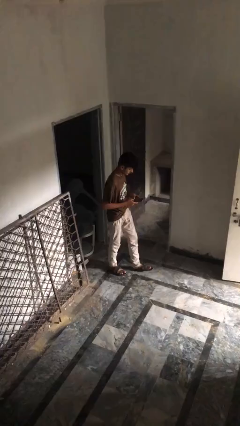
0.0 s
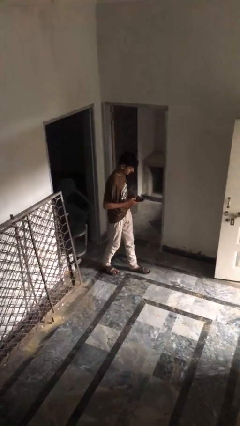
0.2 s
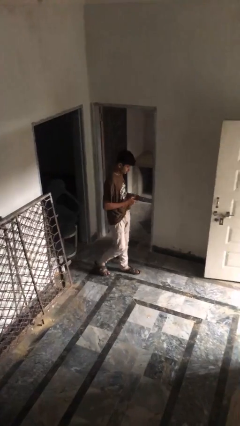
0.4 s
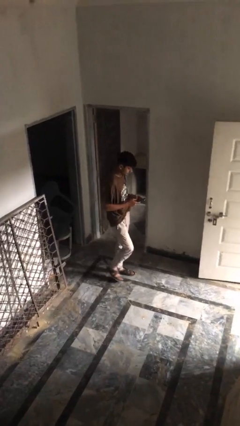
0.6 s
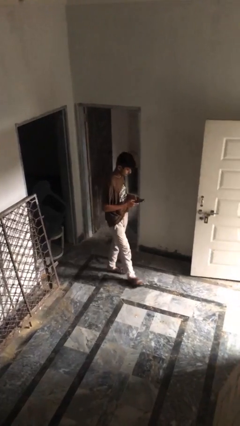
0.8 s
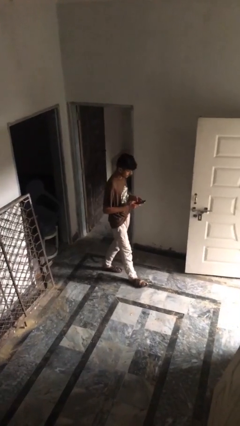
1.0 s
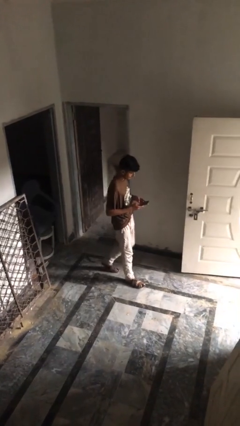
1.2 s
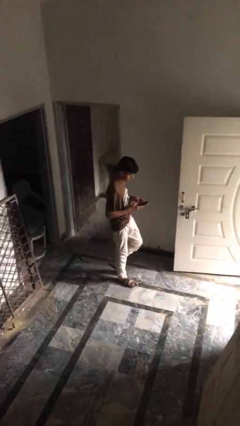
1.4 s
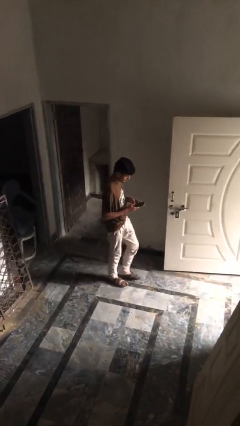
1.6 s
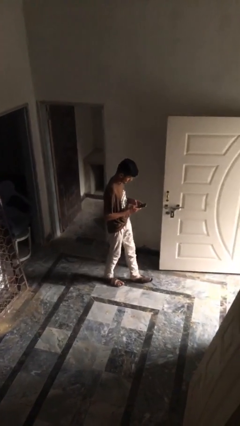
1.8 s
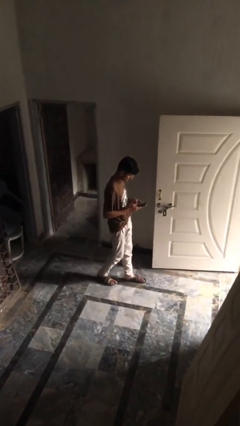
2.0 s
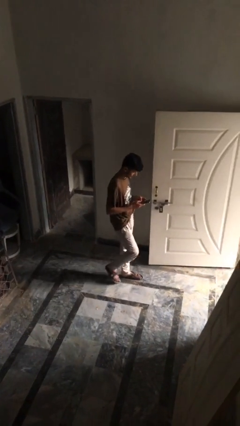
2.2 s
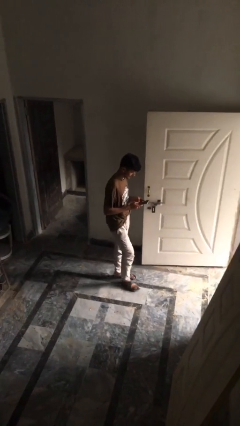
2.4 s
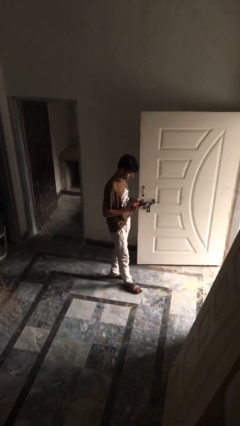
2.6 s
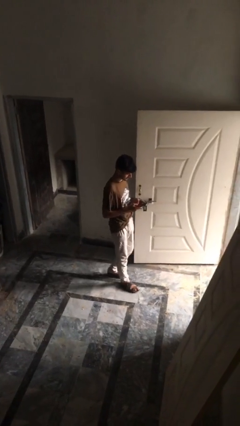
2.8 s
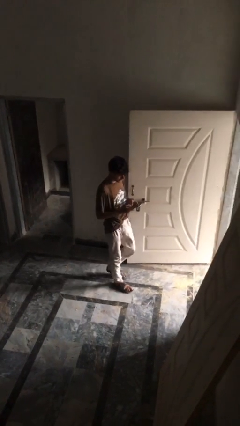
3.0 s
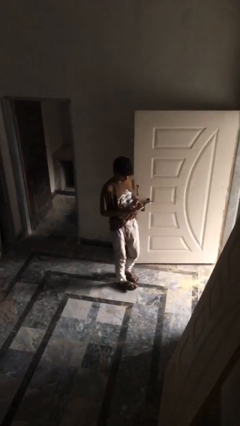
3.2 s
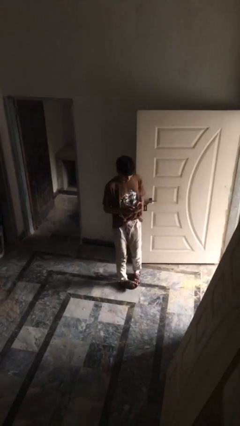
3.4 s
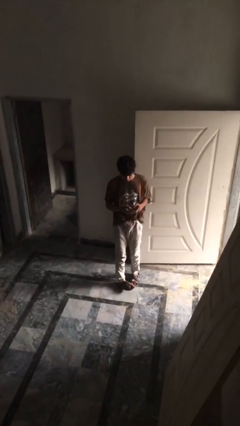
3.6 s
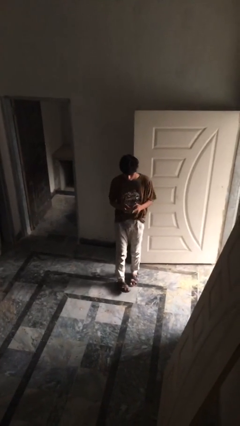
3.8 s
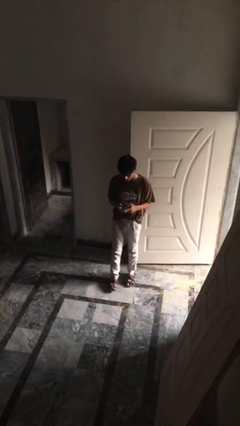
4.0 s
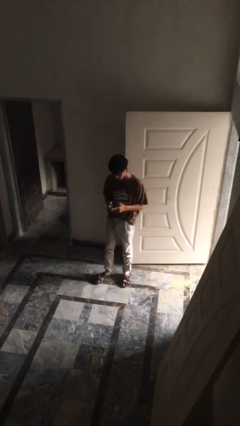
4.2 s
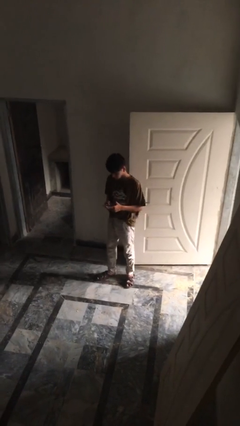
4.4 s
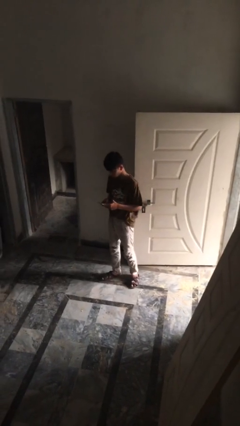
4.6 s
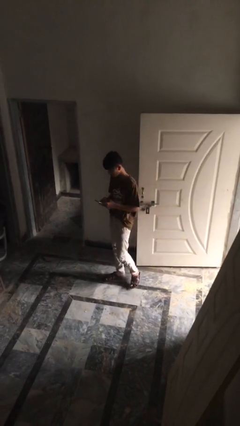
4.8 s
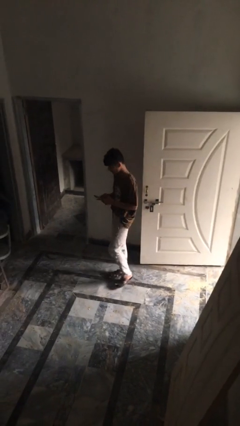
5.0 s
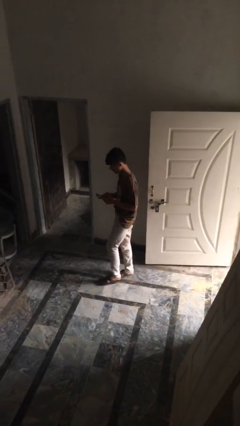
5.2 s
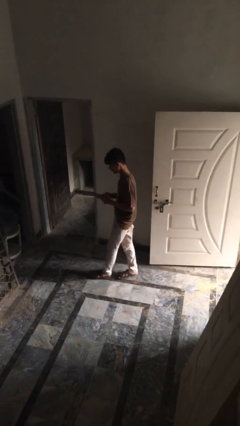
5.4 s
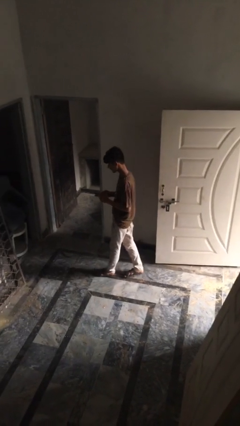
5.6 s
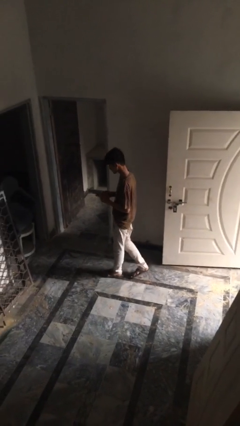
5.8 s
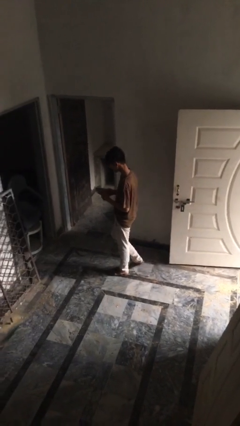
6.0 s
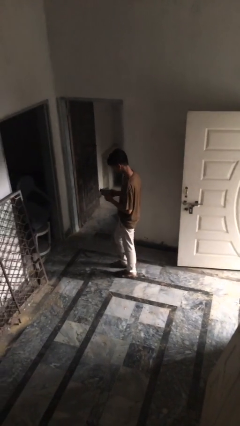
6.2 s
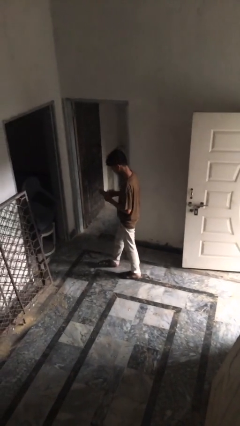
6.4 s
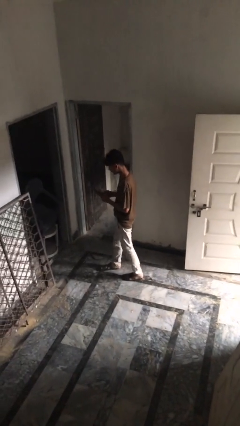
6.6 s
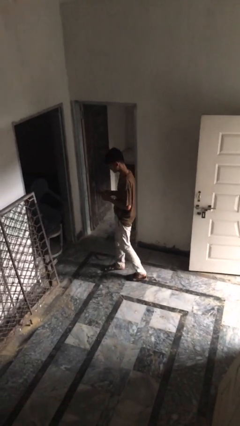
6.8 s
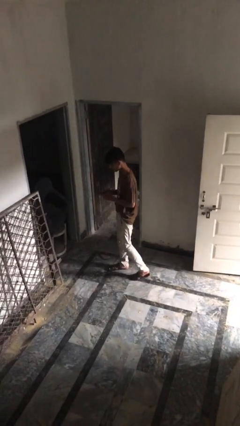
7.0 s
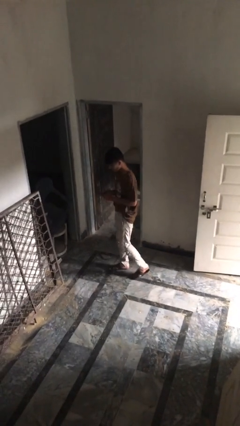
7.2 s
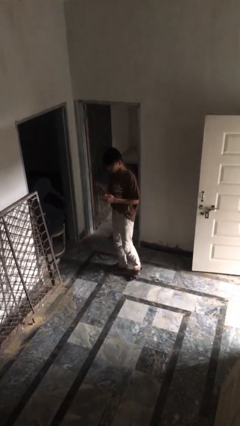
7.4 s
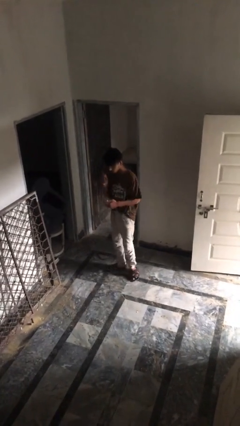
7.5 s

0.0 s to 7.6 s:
person texts on phone

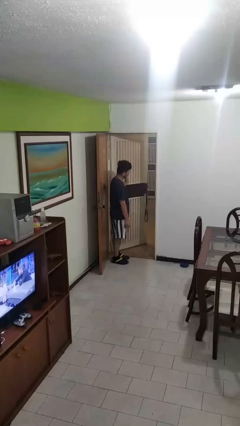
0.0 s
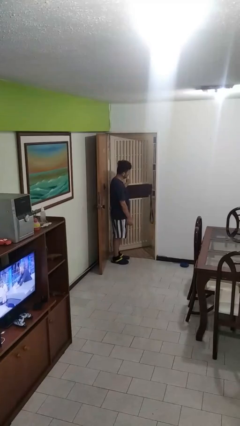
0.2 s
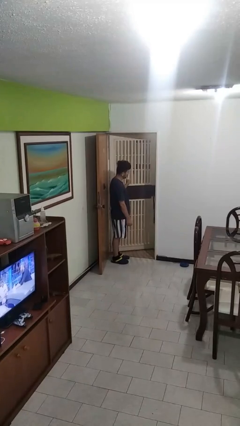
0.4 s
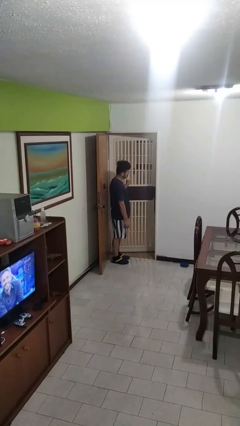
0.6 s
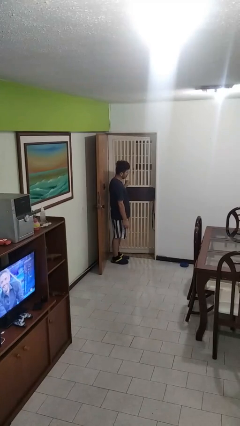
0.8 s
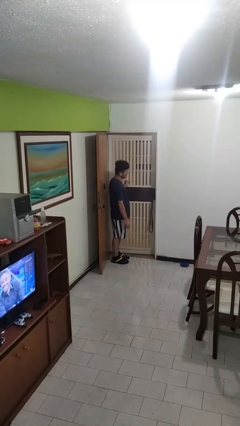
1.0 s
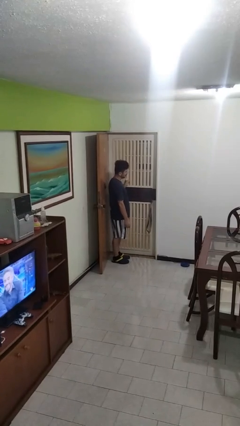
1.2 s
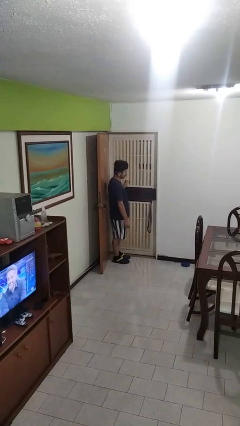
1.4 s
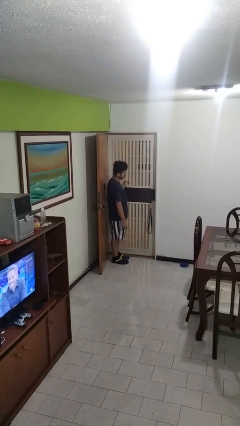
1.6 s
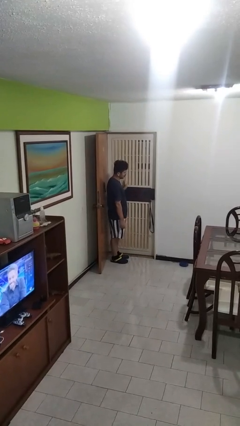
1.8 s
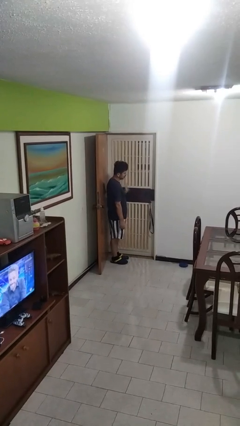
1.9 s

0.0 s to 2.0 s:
person closes facility door

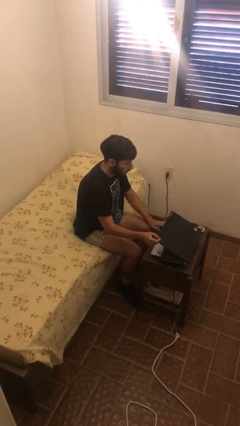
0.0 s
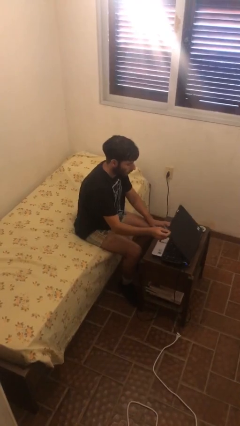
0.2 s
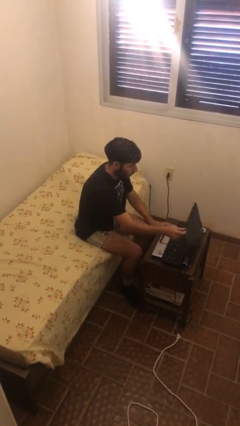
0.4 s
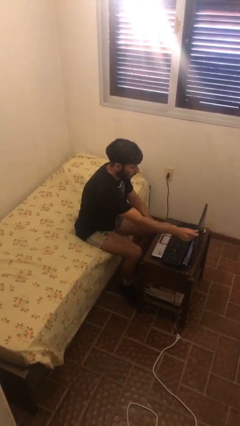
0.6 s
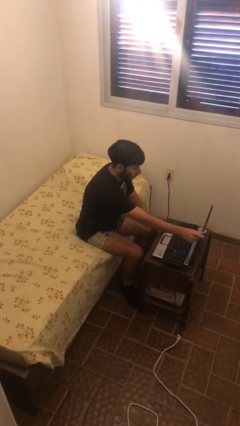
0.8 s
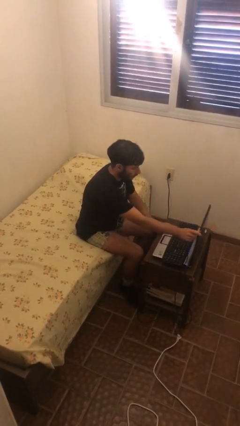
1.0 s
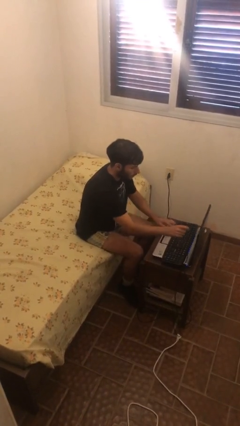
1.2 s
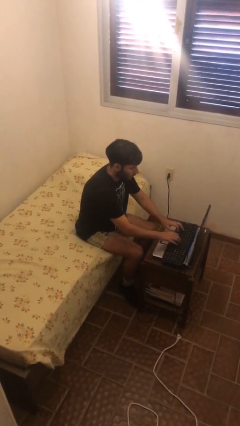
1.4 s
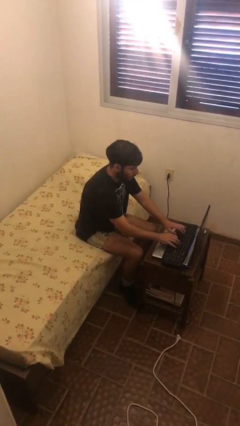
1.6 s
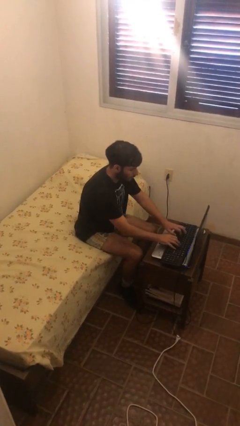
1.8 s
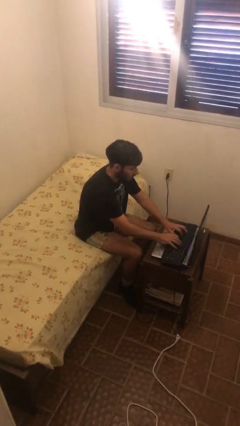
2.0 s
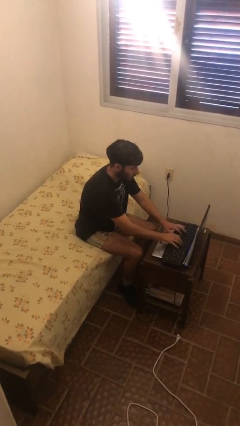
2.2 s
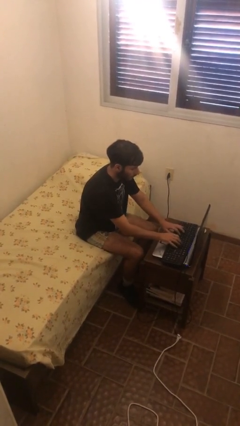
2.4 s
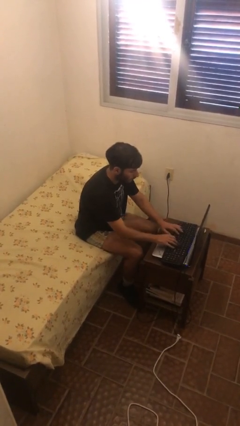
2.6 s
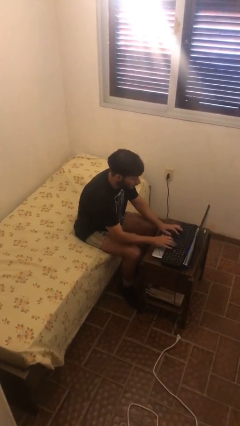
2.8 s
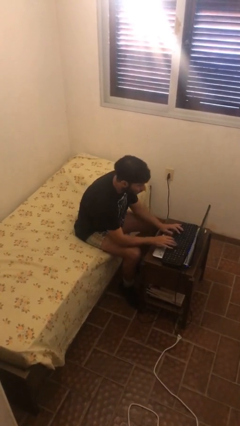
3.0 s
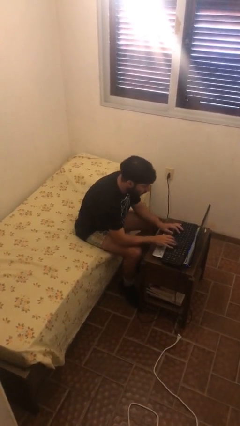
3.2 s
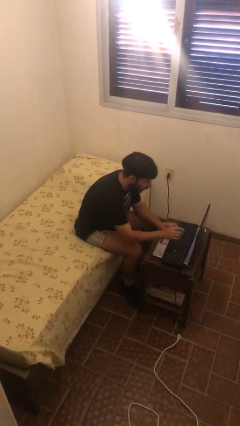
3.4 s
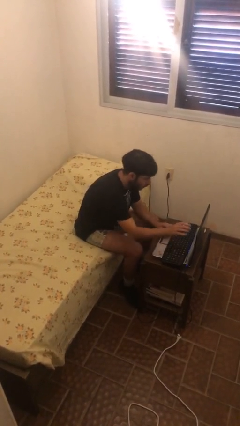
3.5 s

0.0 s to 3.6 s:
person interacts with laptop

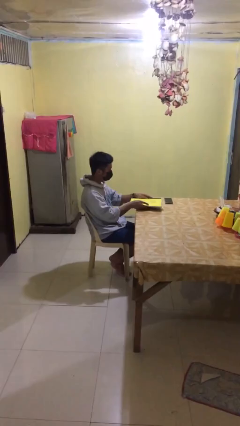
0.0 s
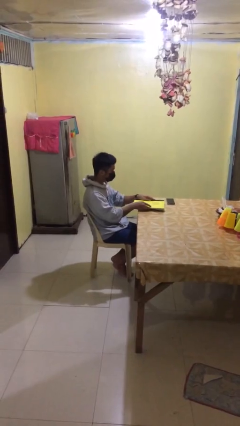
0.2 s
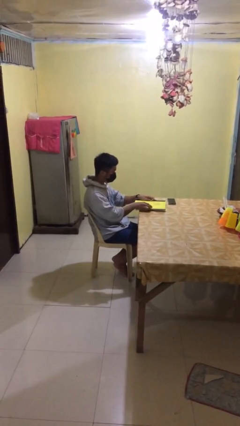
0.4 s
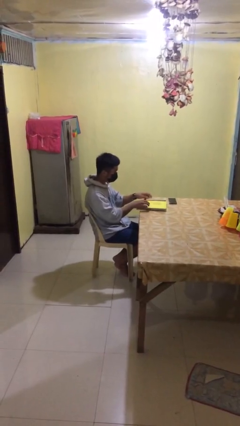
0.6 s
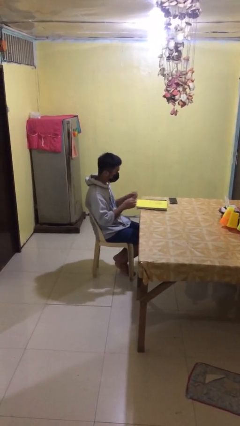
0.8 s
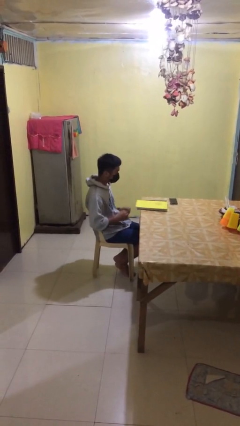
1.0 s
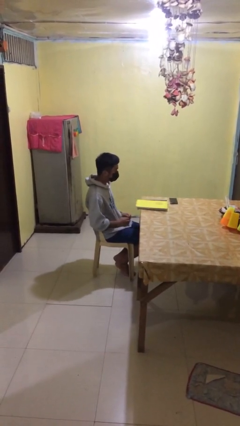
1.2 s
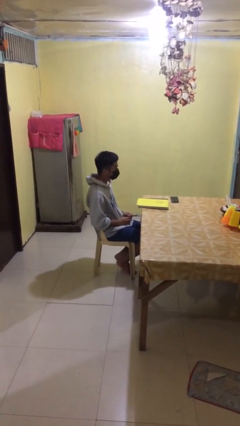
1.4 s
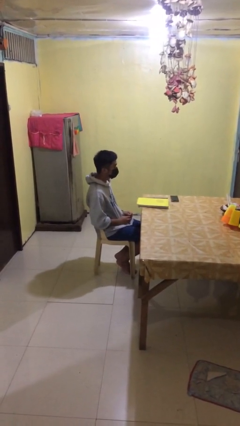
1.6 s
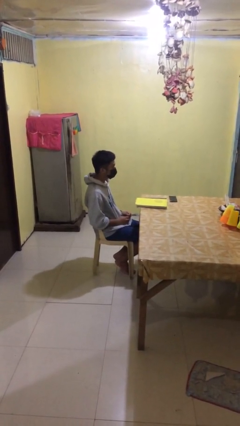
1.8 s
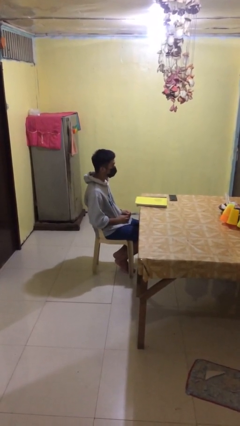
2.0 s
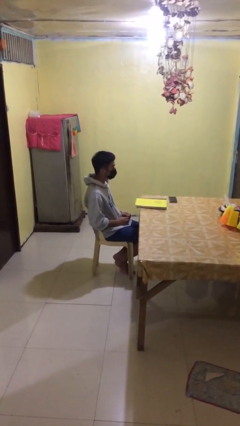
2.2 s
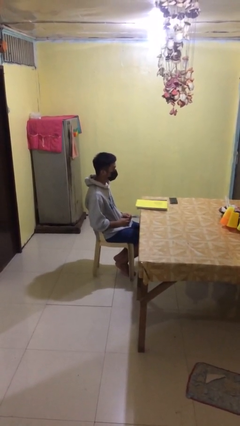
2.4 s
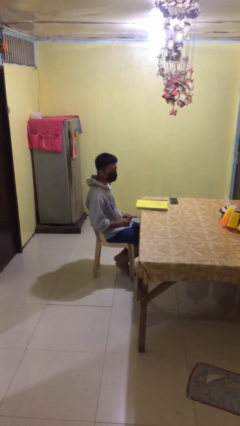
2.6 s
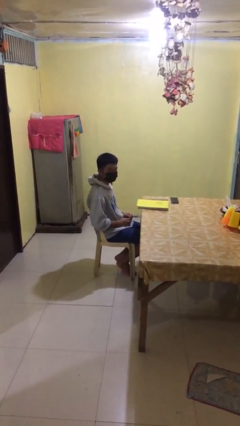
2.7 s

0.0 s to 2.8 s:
person puts down object on table

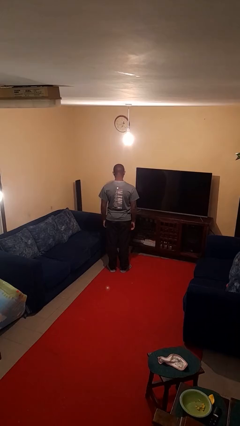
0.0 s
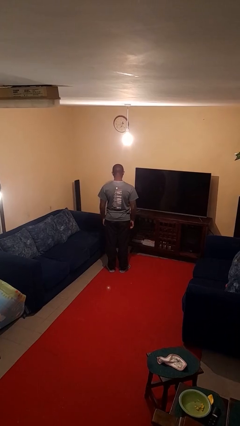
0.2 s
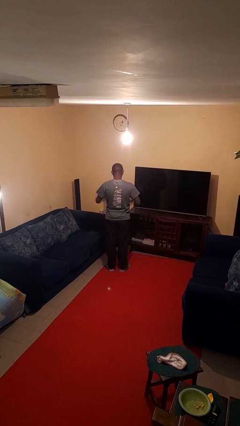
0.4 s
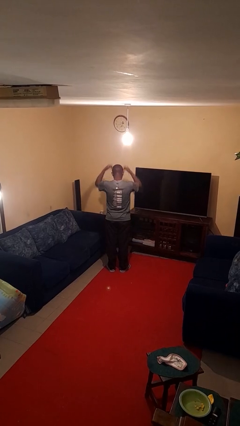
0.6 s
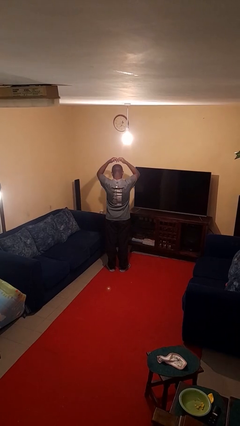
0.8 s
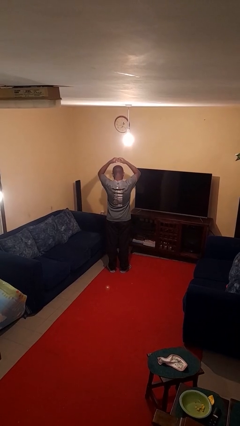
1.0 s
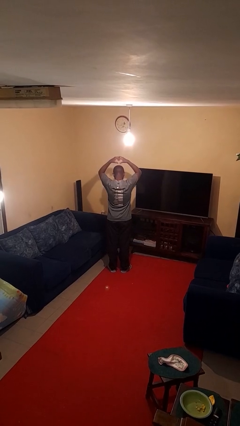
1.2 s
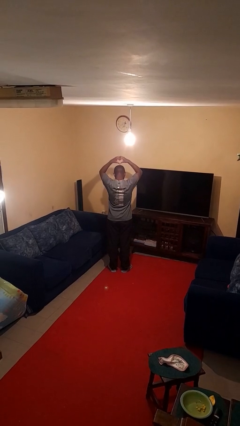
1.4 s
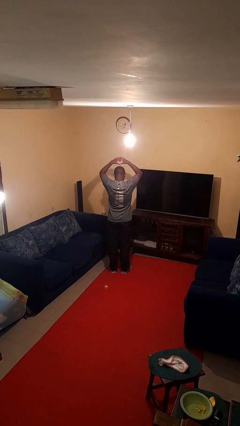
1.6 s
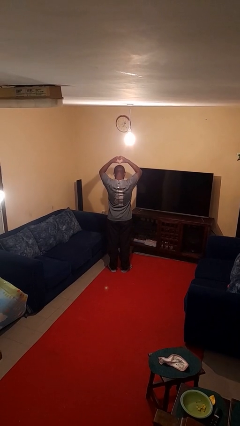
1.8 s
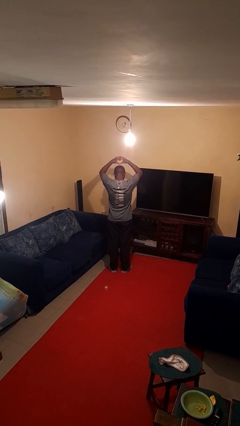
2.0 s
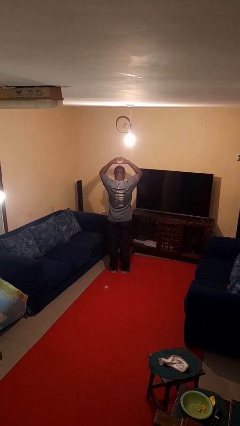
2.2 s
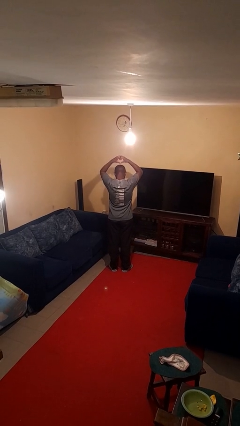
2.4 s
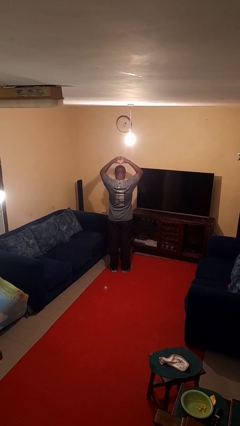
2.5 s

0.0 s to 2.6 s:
person gestures heart
